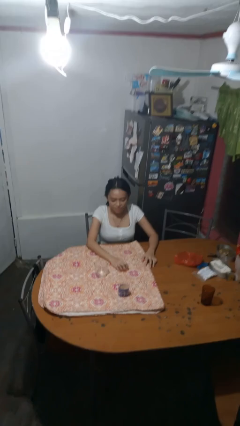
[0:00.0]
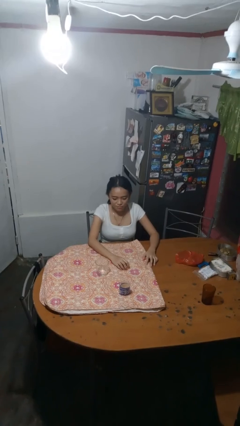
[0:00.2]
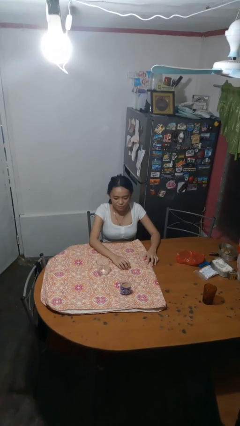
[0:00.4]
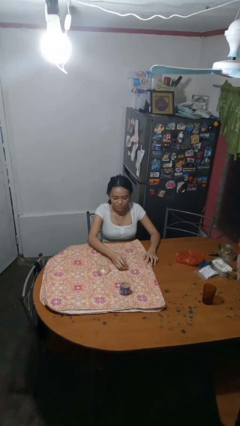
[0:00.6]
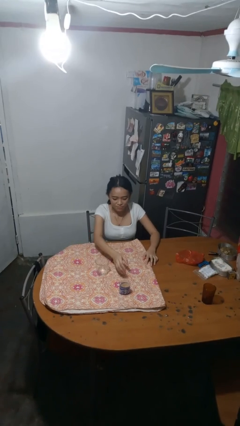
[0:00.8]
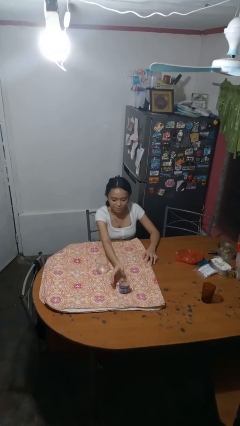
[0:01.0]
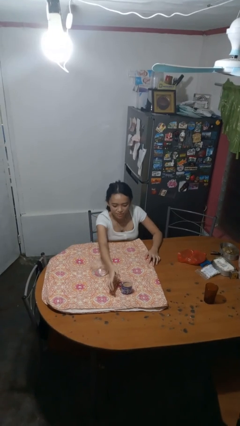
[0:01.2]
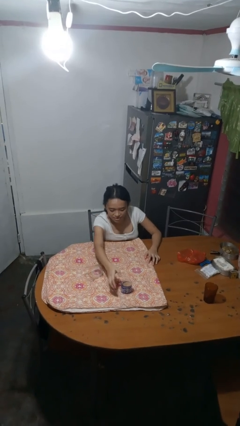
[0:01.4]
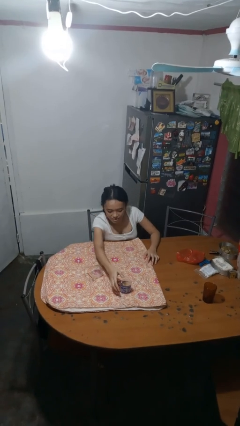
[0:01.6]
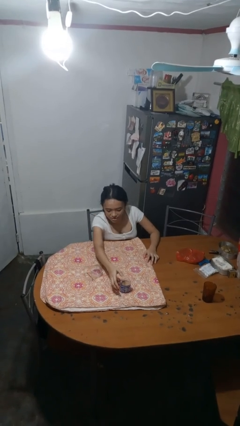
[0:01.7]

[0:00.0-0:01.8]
person knocks over glass

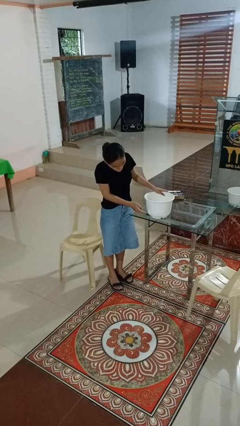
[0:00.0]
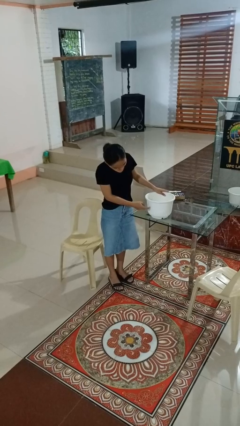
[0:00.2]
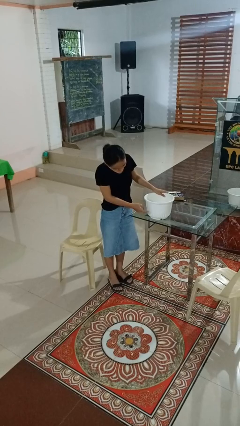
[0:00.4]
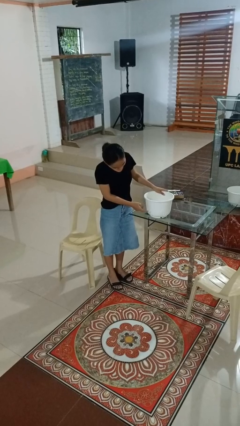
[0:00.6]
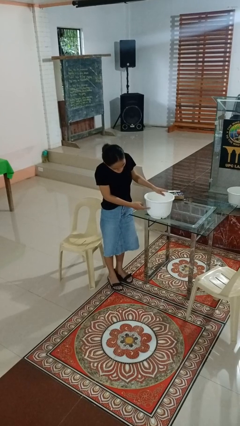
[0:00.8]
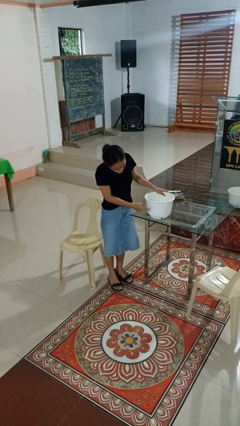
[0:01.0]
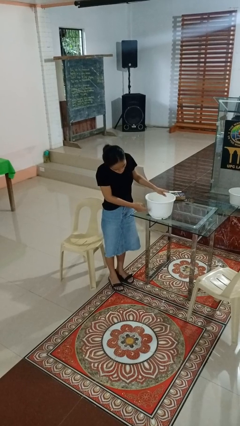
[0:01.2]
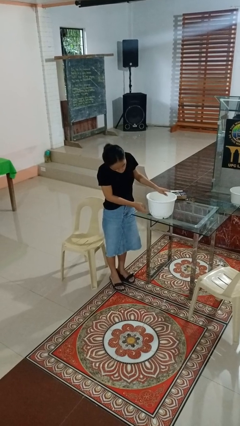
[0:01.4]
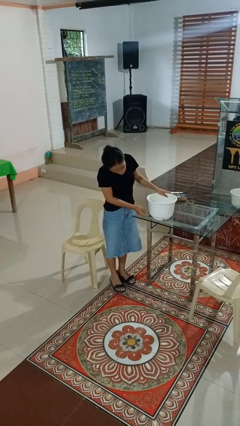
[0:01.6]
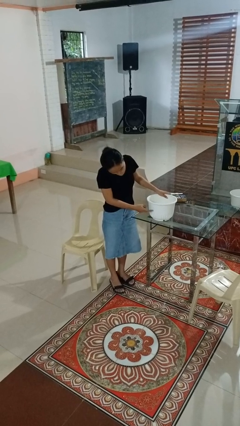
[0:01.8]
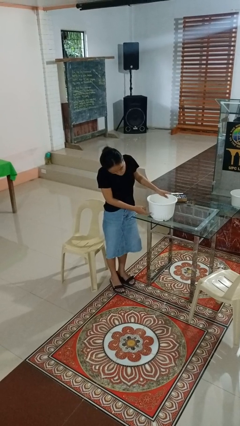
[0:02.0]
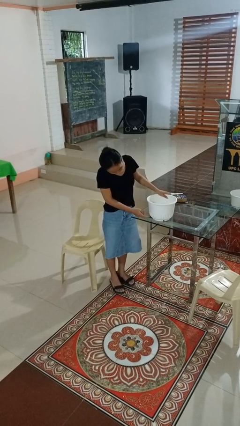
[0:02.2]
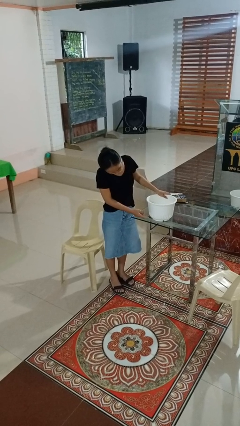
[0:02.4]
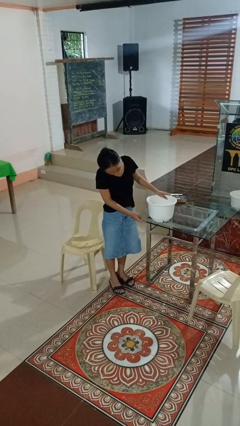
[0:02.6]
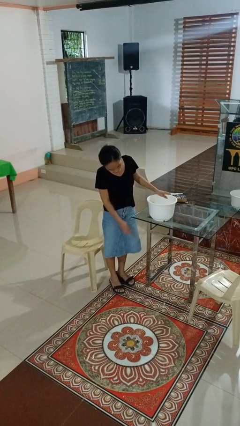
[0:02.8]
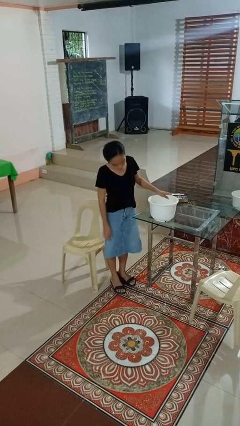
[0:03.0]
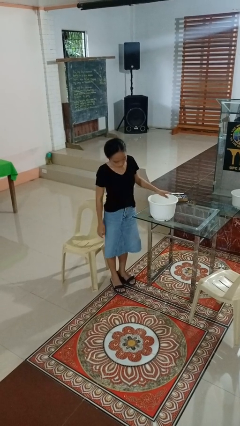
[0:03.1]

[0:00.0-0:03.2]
person taps object with finger

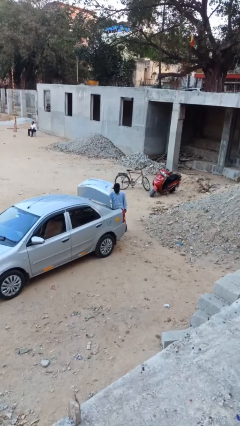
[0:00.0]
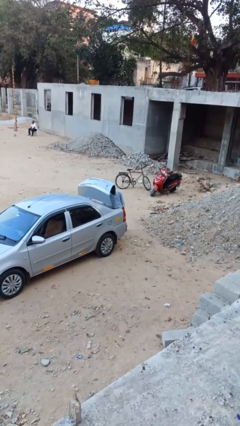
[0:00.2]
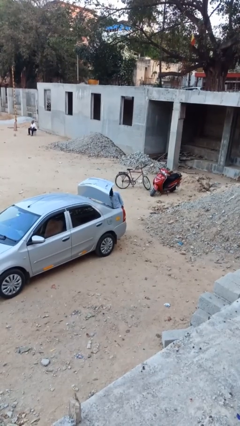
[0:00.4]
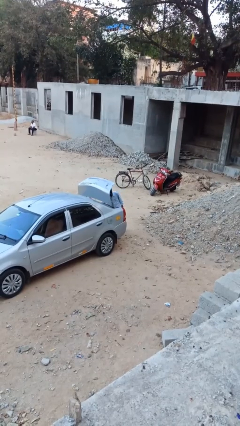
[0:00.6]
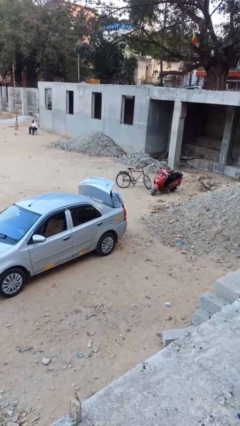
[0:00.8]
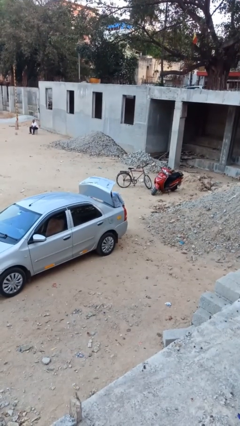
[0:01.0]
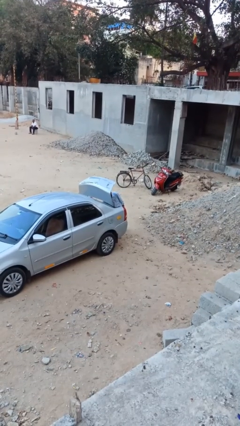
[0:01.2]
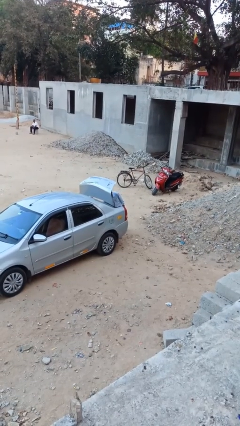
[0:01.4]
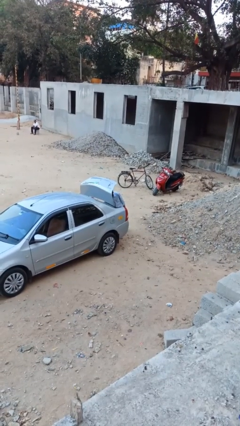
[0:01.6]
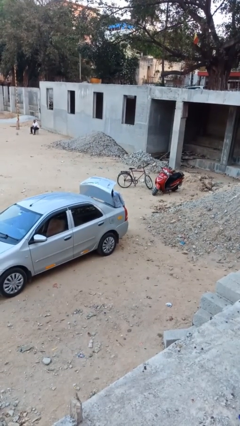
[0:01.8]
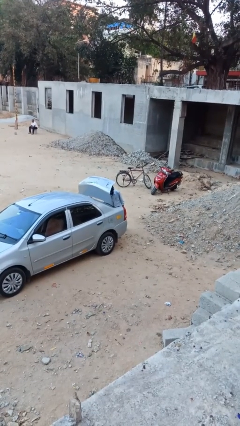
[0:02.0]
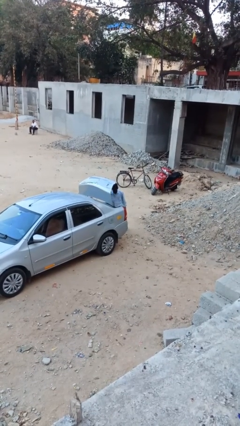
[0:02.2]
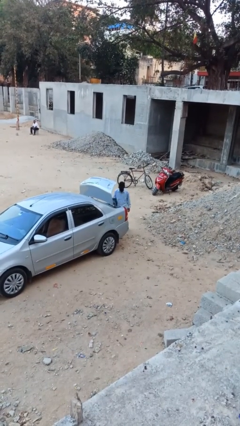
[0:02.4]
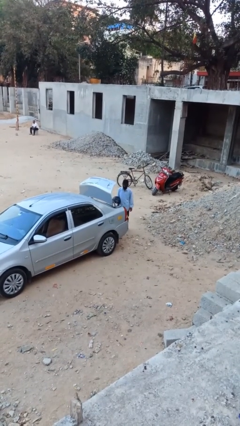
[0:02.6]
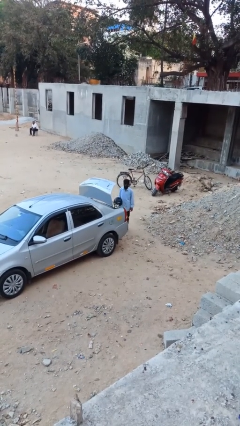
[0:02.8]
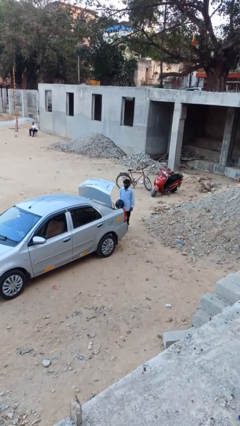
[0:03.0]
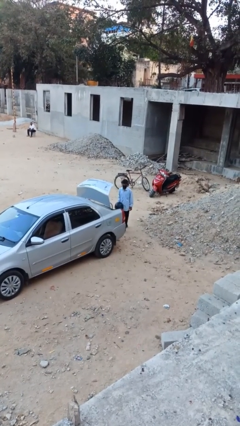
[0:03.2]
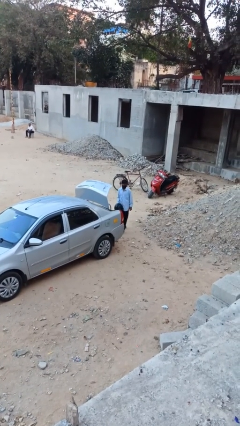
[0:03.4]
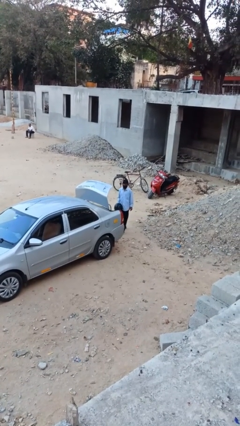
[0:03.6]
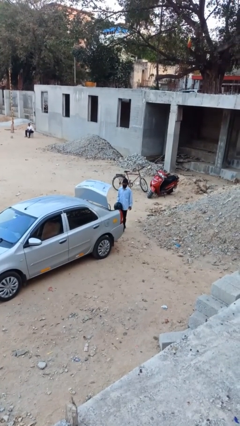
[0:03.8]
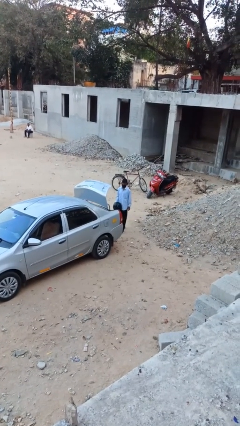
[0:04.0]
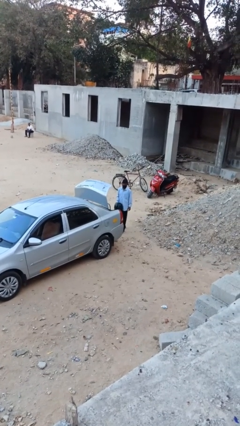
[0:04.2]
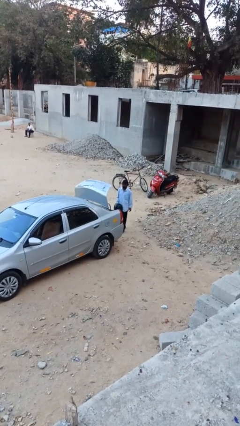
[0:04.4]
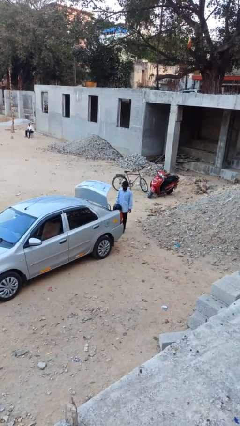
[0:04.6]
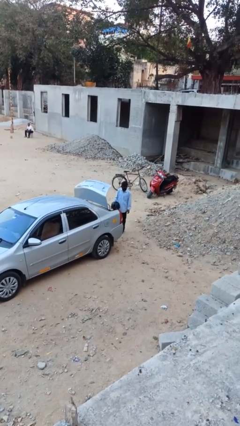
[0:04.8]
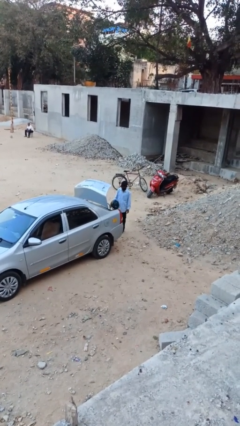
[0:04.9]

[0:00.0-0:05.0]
person unloads car

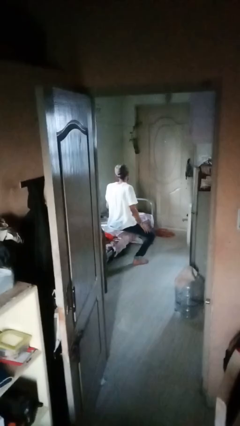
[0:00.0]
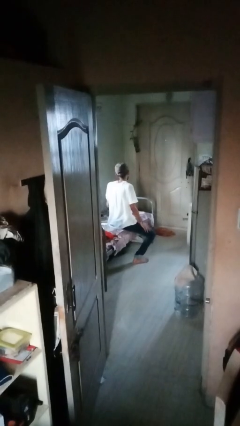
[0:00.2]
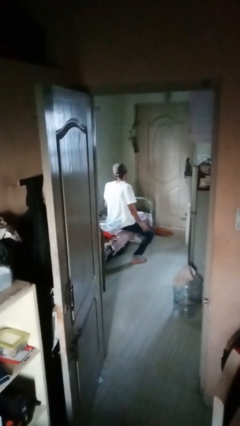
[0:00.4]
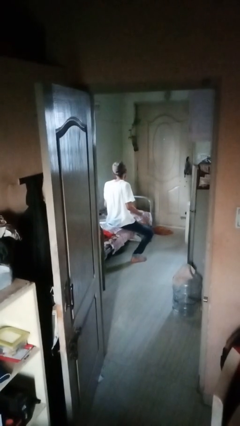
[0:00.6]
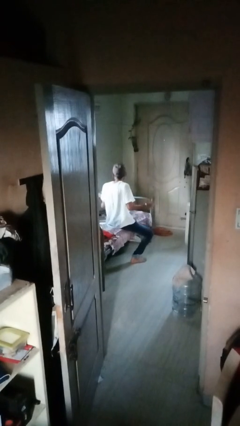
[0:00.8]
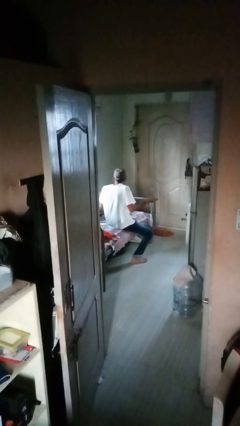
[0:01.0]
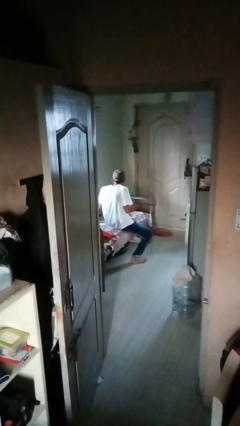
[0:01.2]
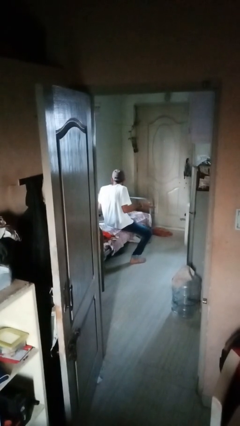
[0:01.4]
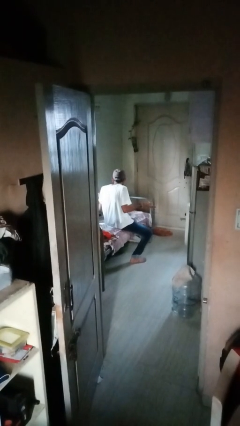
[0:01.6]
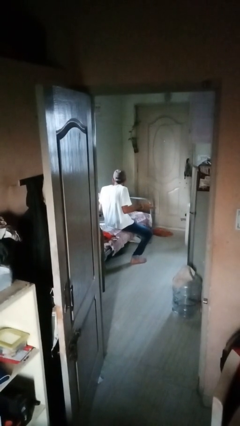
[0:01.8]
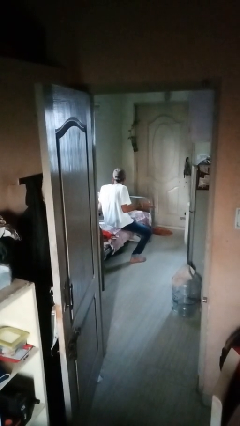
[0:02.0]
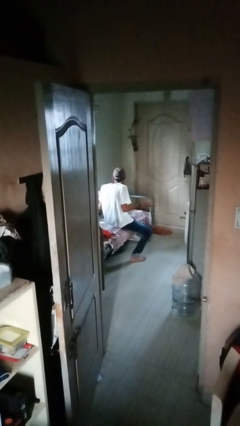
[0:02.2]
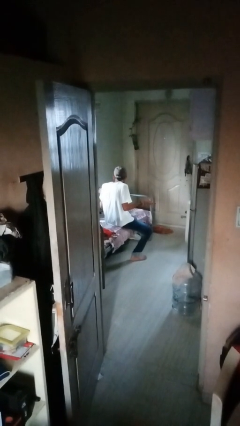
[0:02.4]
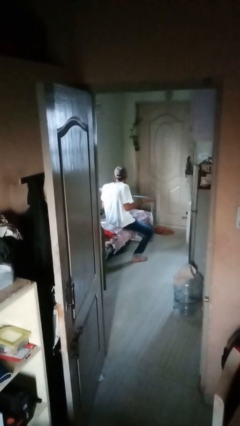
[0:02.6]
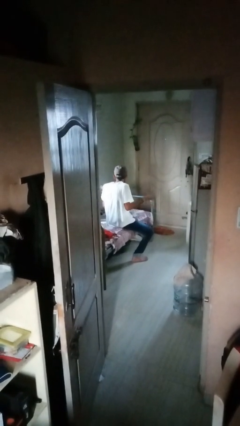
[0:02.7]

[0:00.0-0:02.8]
person shrugs

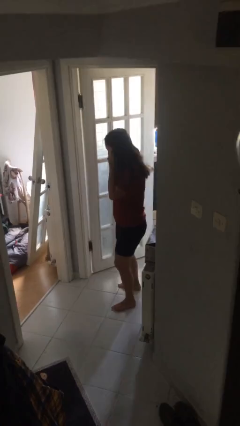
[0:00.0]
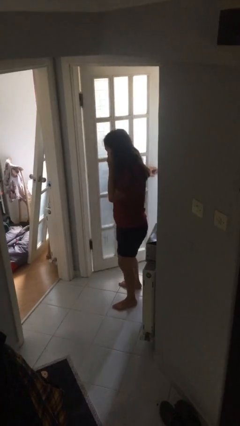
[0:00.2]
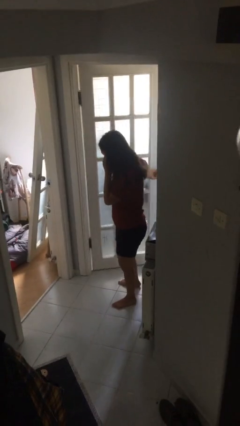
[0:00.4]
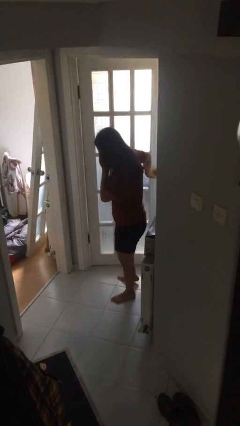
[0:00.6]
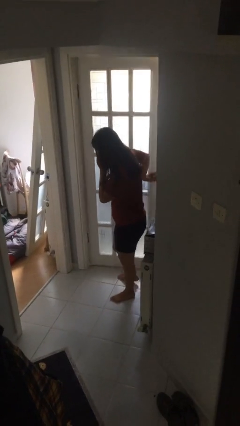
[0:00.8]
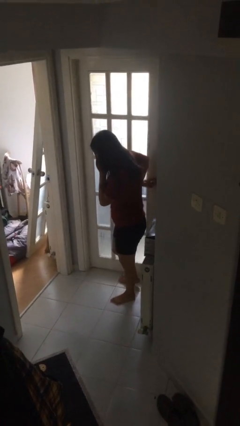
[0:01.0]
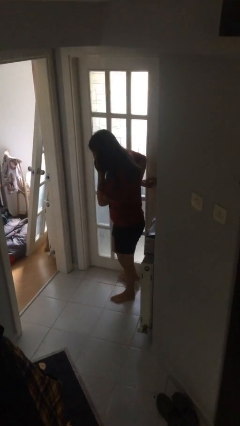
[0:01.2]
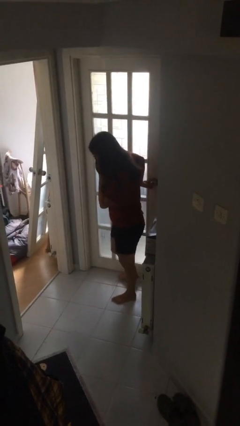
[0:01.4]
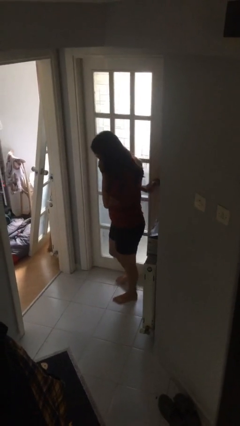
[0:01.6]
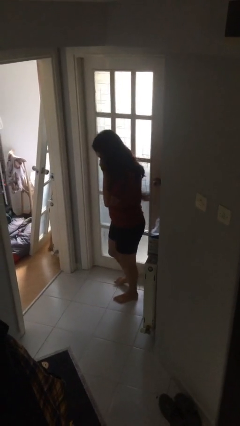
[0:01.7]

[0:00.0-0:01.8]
person closes facility door

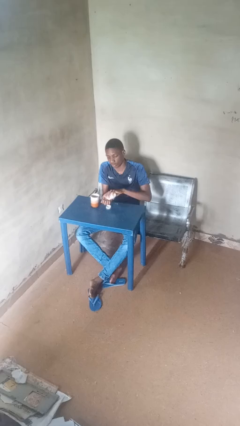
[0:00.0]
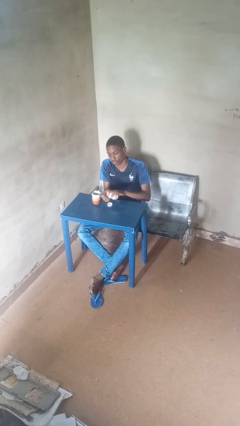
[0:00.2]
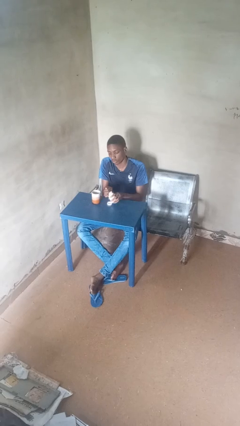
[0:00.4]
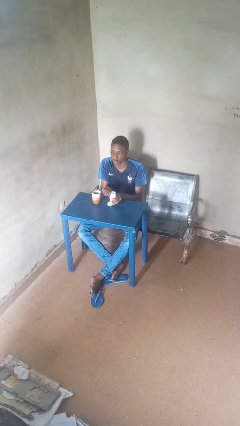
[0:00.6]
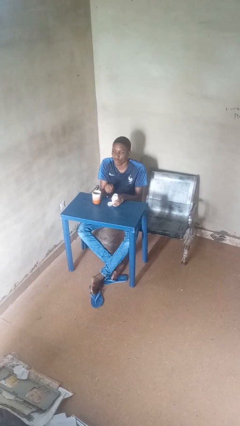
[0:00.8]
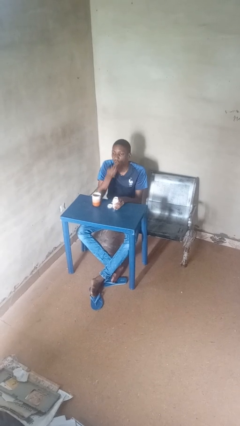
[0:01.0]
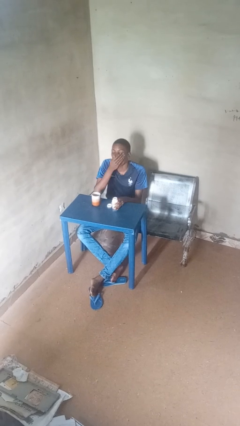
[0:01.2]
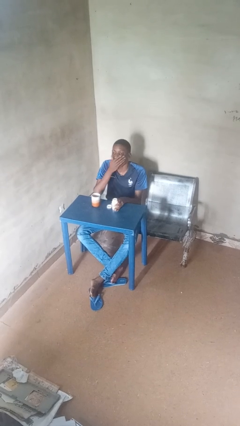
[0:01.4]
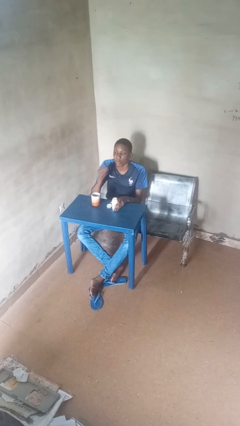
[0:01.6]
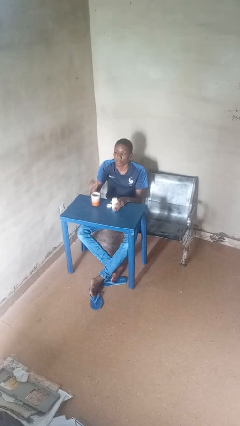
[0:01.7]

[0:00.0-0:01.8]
person takes medicine pills

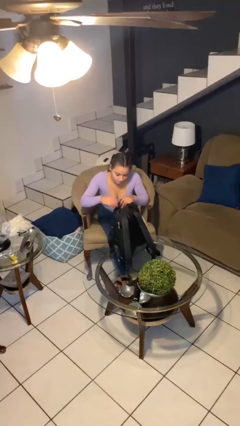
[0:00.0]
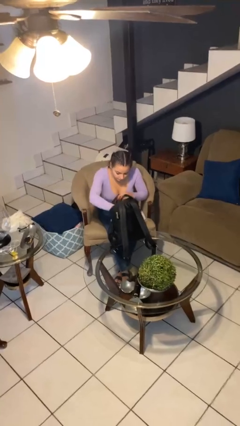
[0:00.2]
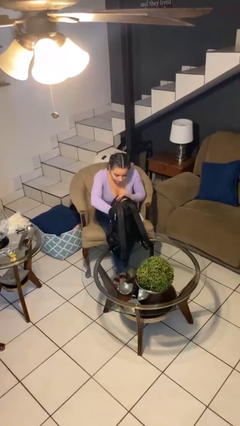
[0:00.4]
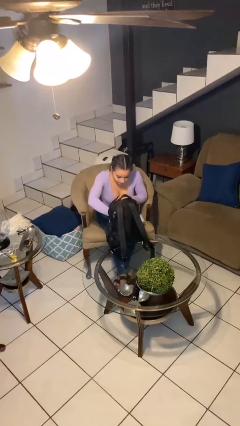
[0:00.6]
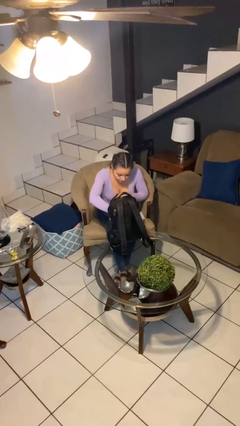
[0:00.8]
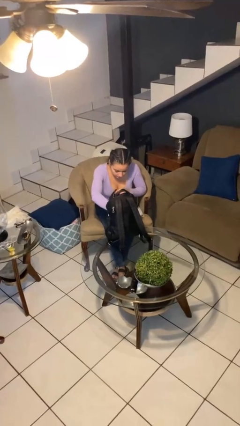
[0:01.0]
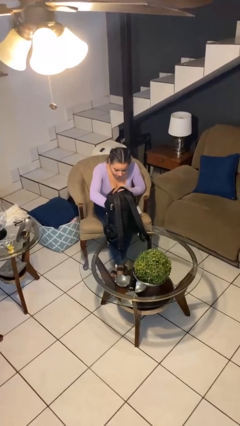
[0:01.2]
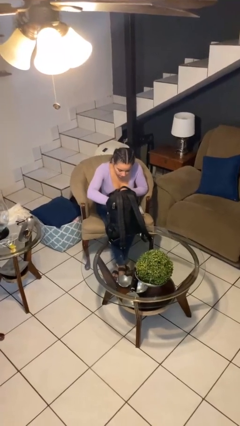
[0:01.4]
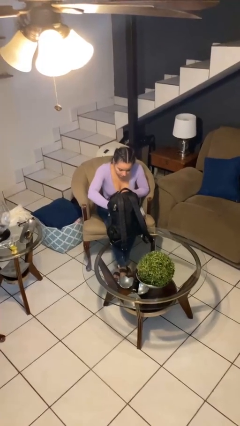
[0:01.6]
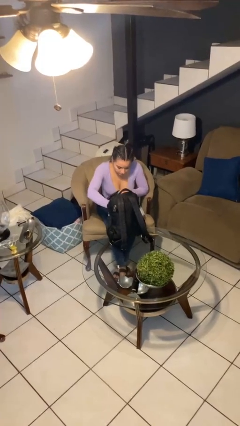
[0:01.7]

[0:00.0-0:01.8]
person searches in backpack
